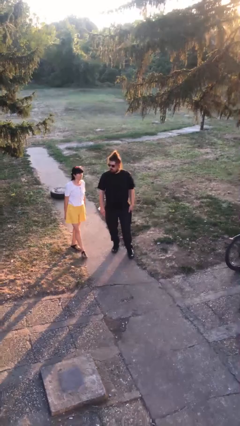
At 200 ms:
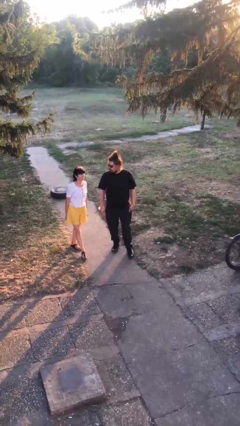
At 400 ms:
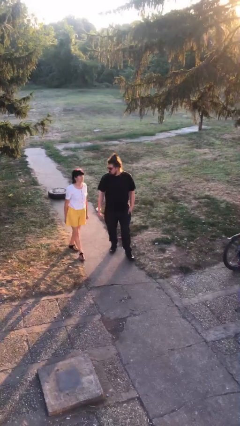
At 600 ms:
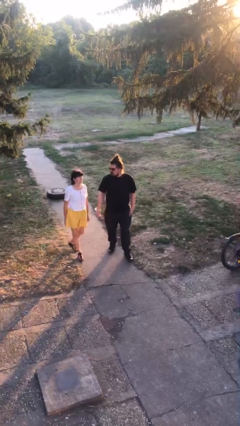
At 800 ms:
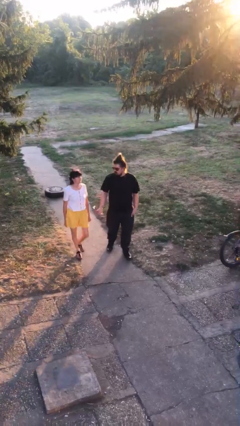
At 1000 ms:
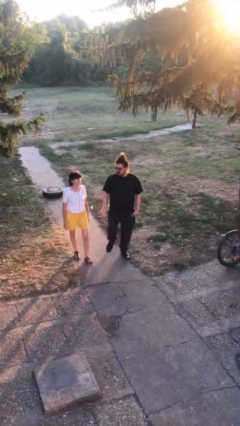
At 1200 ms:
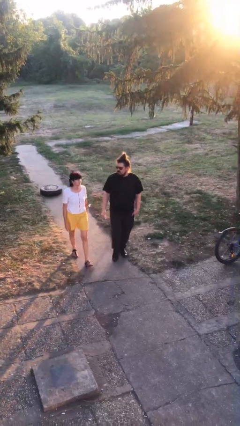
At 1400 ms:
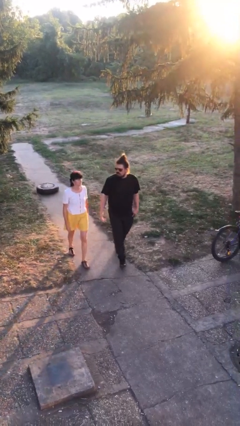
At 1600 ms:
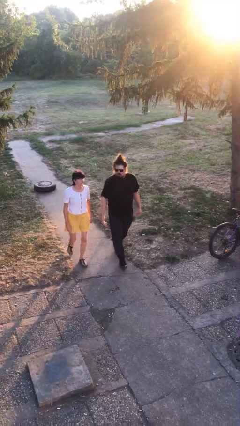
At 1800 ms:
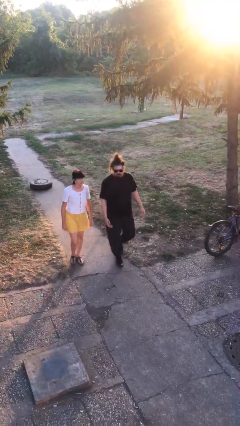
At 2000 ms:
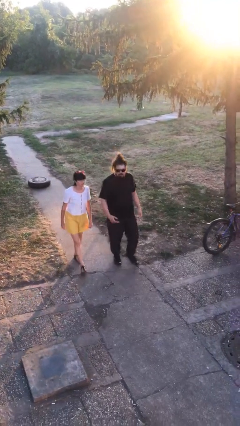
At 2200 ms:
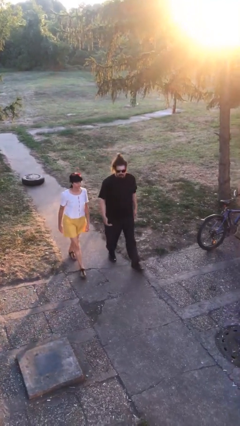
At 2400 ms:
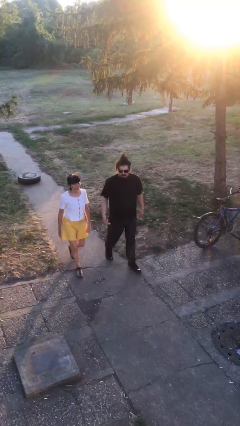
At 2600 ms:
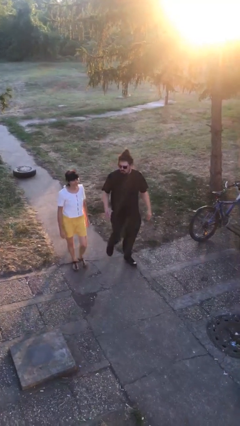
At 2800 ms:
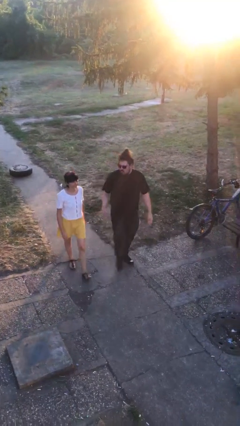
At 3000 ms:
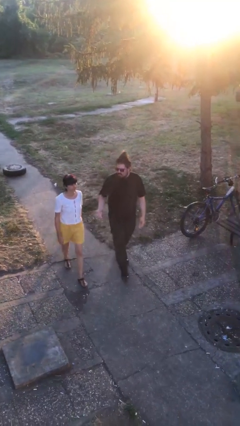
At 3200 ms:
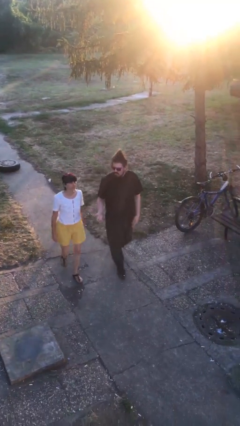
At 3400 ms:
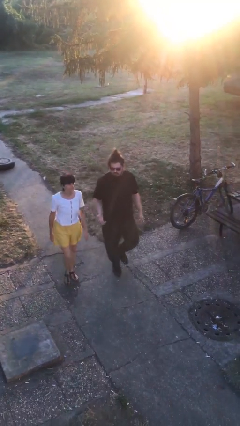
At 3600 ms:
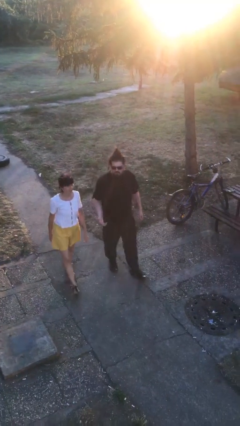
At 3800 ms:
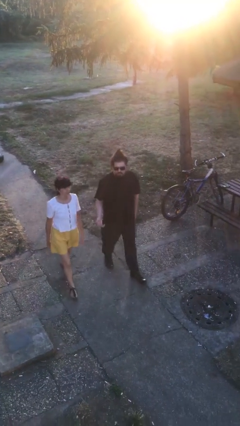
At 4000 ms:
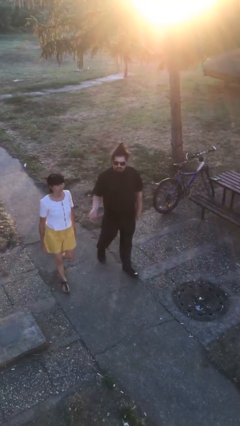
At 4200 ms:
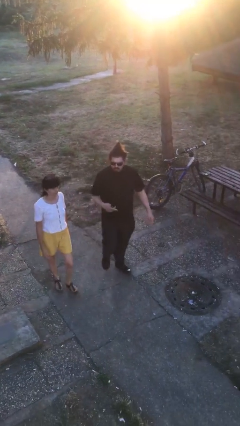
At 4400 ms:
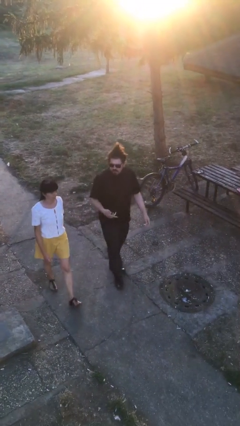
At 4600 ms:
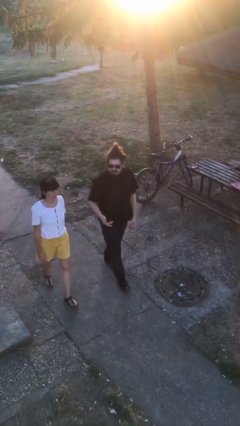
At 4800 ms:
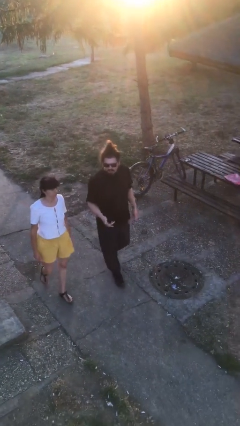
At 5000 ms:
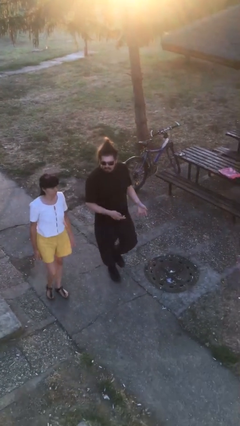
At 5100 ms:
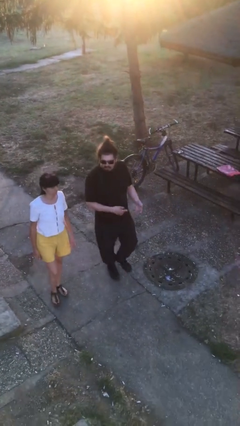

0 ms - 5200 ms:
person talks to person

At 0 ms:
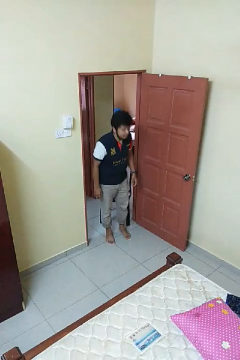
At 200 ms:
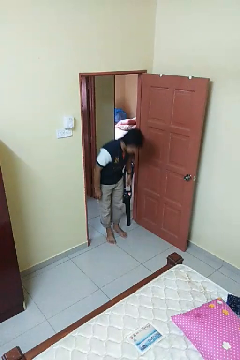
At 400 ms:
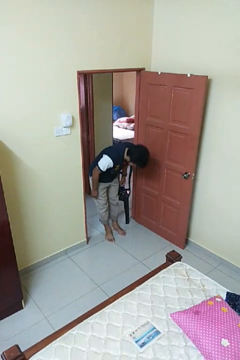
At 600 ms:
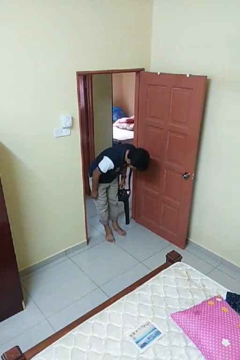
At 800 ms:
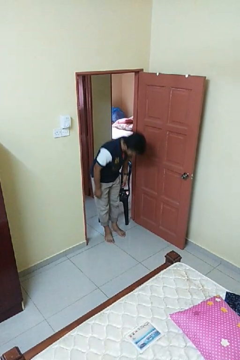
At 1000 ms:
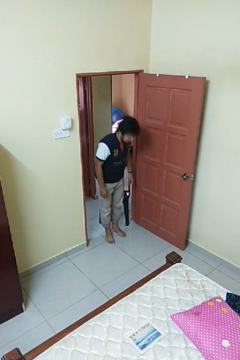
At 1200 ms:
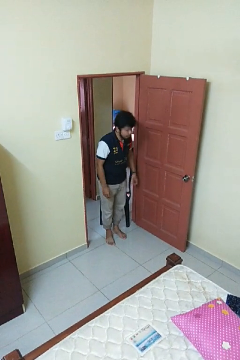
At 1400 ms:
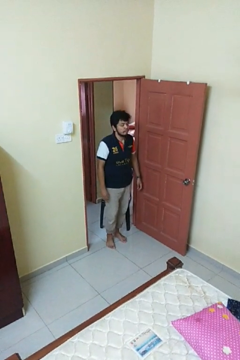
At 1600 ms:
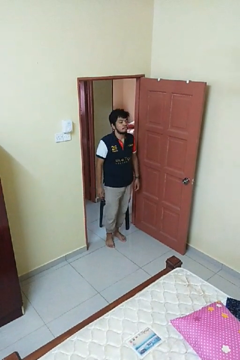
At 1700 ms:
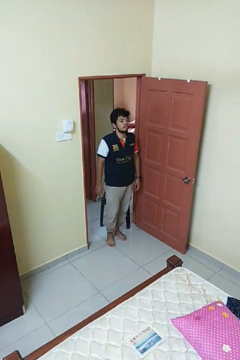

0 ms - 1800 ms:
person bows

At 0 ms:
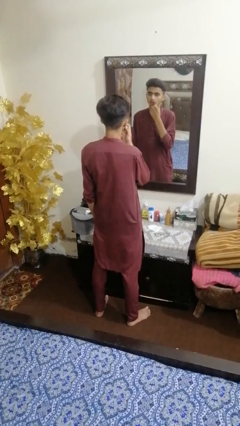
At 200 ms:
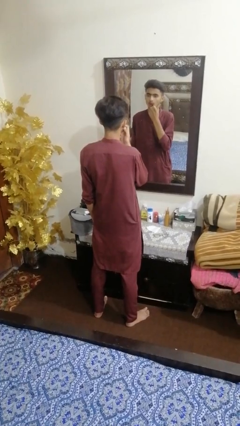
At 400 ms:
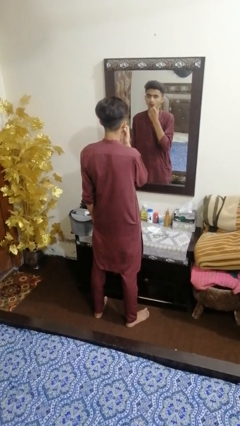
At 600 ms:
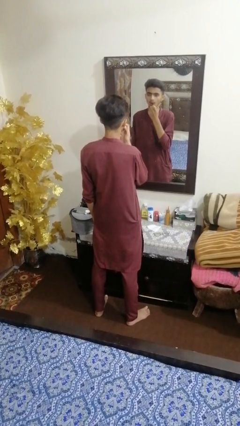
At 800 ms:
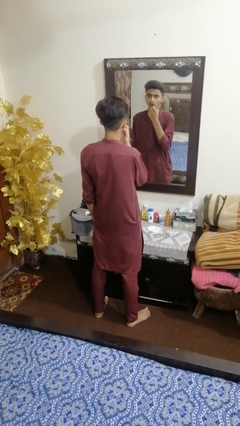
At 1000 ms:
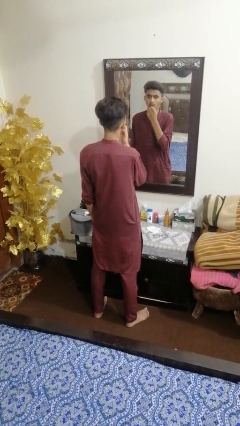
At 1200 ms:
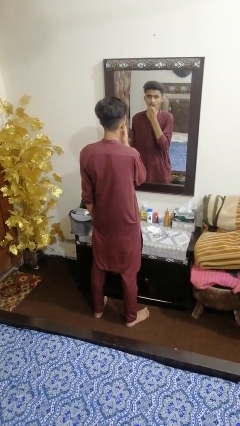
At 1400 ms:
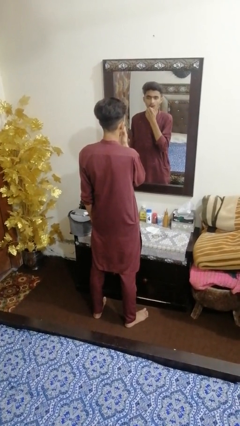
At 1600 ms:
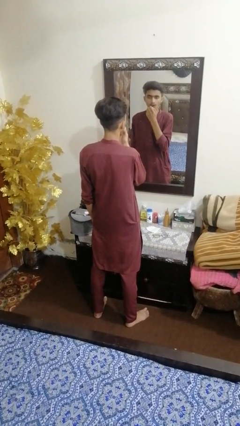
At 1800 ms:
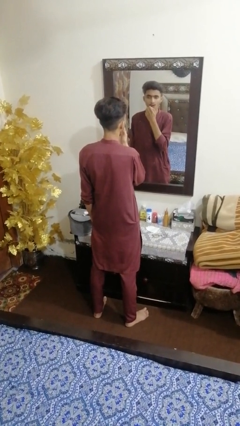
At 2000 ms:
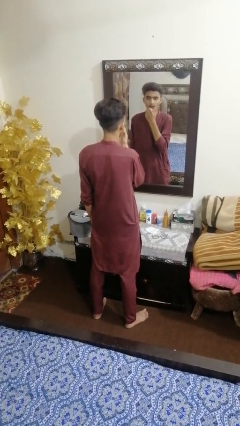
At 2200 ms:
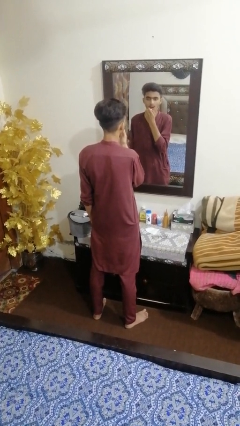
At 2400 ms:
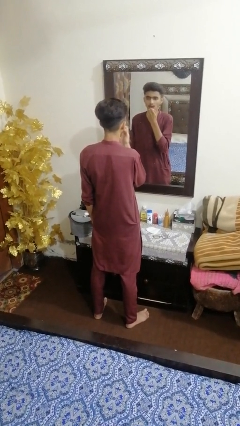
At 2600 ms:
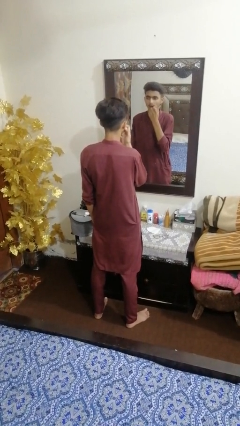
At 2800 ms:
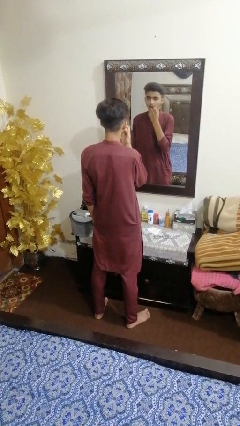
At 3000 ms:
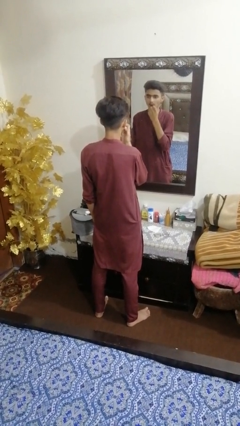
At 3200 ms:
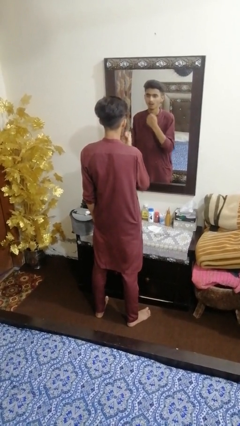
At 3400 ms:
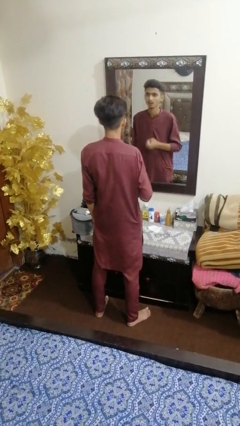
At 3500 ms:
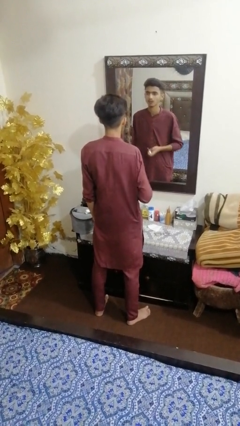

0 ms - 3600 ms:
person applies lip makeup

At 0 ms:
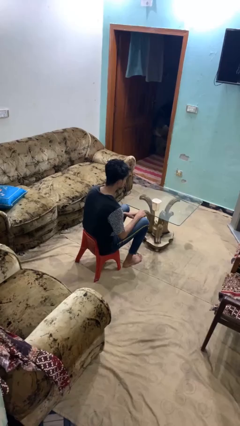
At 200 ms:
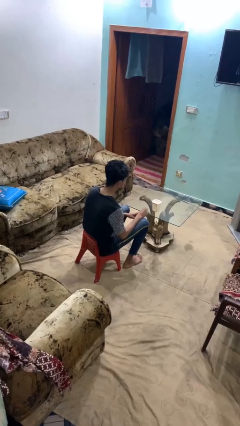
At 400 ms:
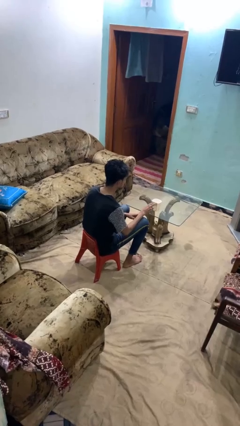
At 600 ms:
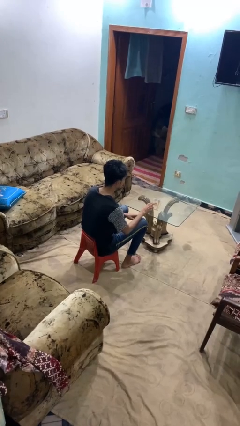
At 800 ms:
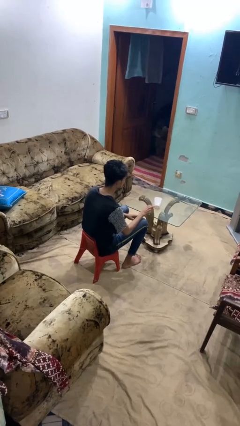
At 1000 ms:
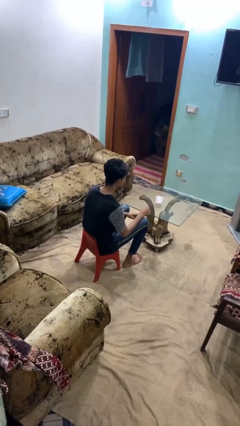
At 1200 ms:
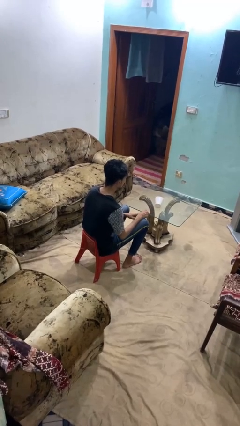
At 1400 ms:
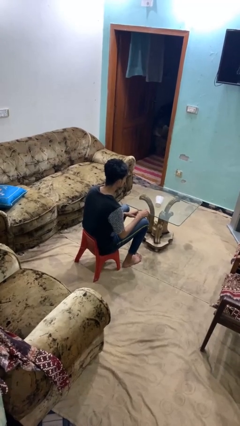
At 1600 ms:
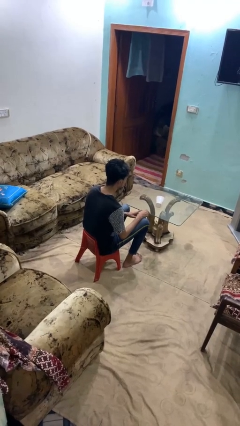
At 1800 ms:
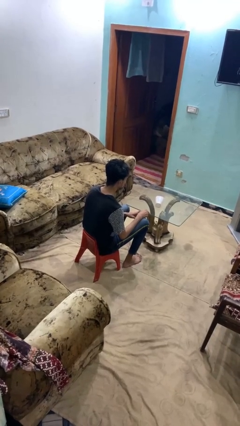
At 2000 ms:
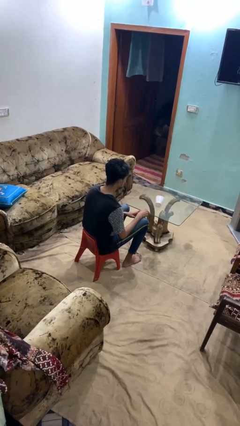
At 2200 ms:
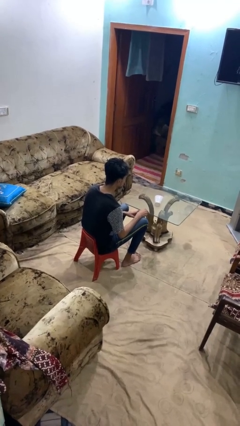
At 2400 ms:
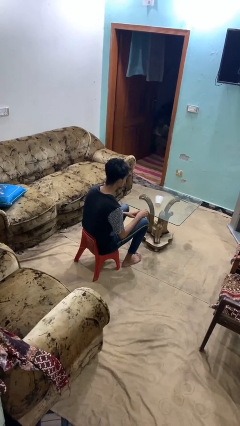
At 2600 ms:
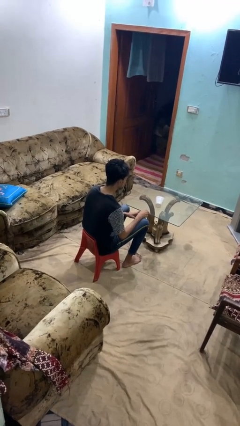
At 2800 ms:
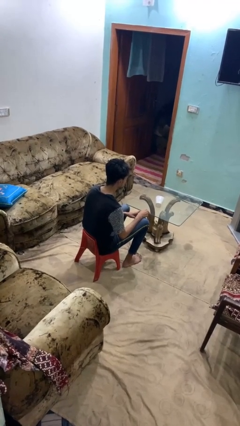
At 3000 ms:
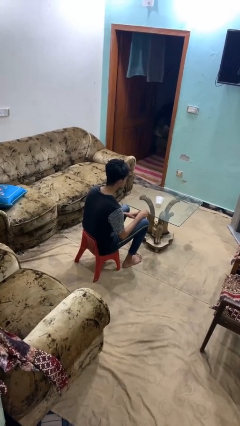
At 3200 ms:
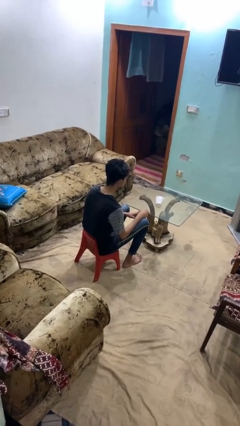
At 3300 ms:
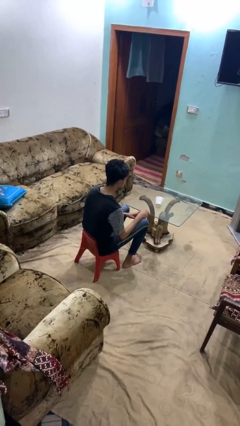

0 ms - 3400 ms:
person knocks over glass

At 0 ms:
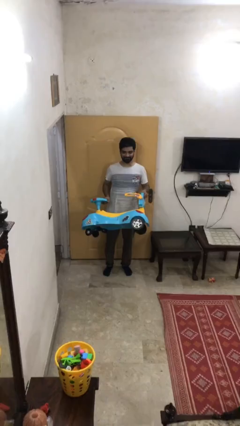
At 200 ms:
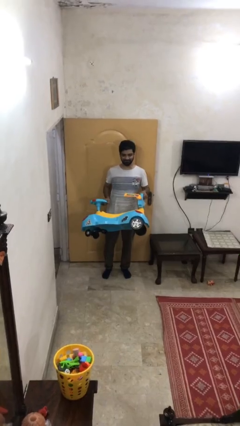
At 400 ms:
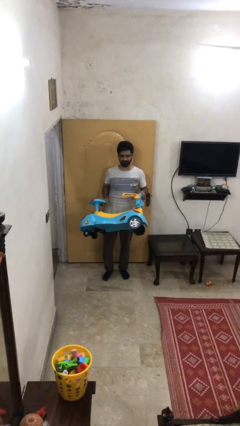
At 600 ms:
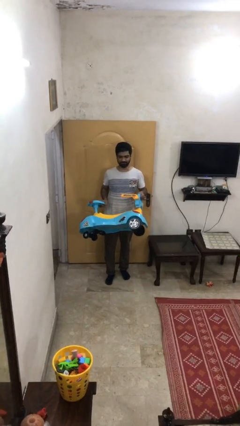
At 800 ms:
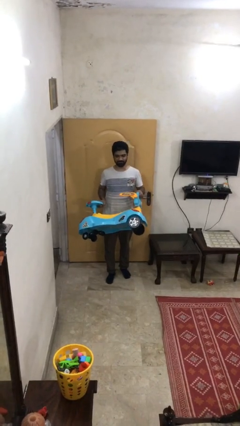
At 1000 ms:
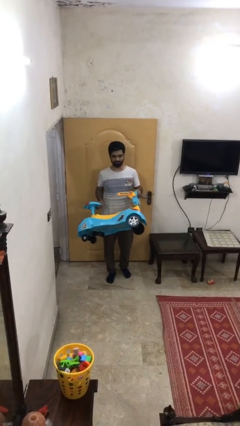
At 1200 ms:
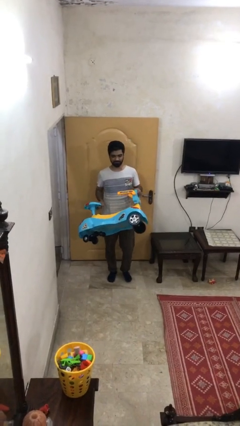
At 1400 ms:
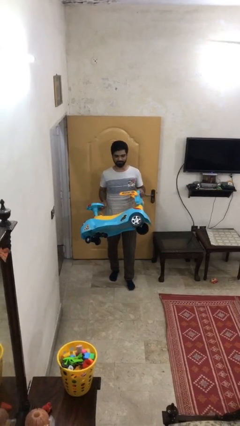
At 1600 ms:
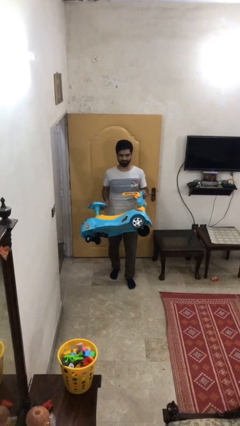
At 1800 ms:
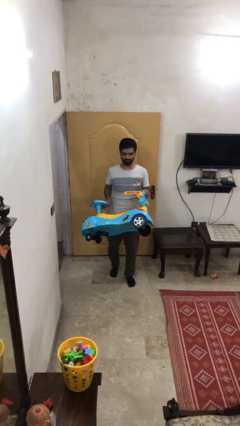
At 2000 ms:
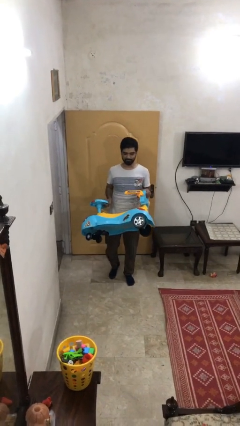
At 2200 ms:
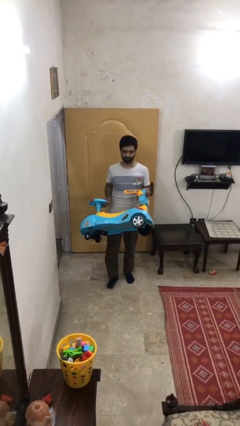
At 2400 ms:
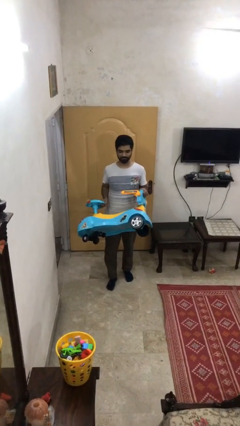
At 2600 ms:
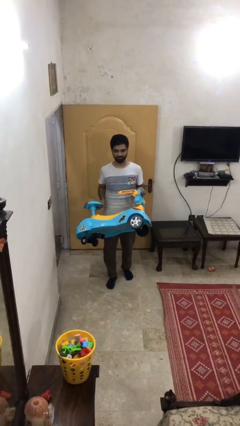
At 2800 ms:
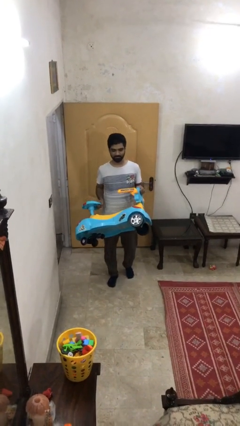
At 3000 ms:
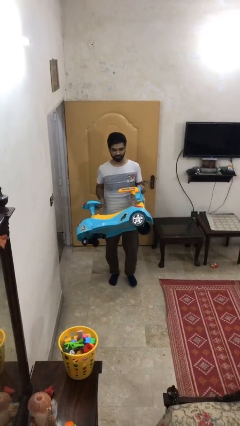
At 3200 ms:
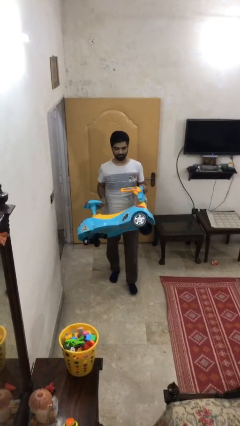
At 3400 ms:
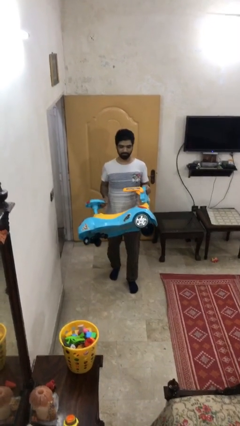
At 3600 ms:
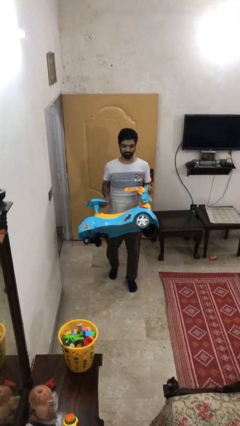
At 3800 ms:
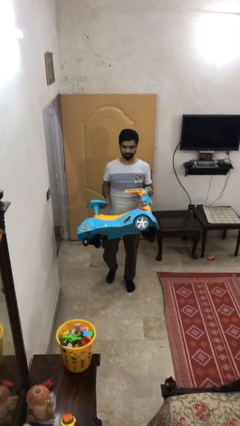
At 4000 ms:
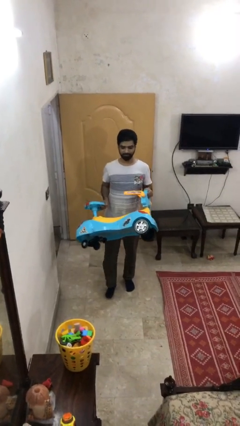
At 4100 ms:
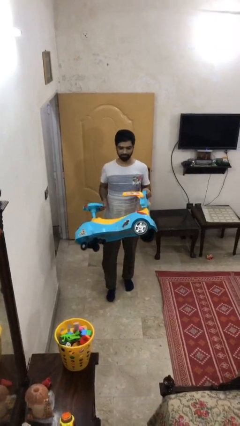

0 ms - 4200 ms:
person carries heavy object

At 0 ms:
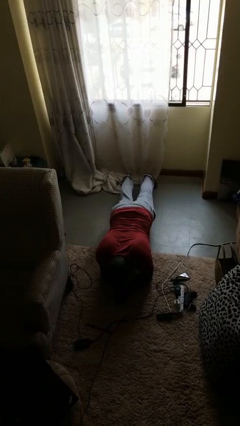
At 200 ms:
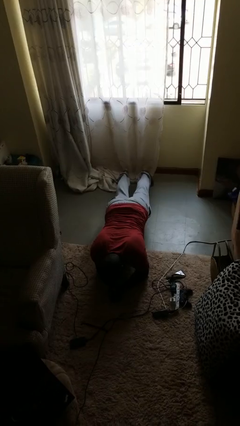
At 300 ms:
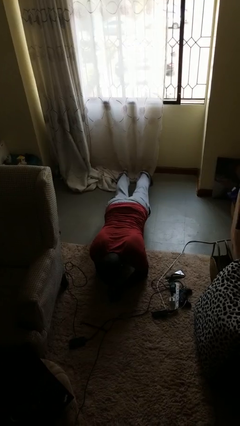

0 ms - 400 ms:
person stands up from floor
